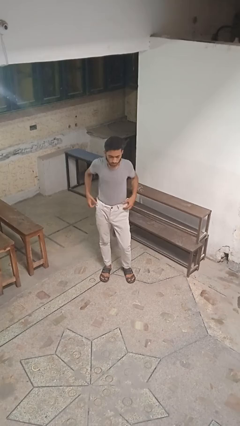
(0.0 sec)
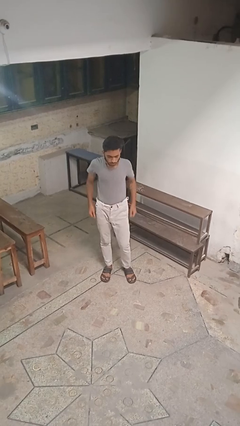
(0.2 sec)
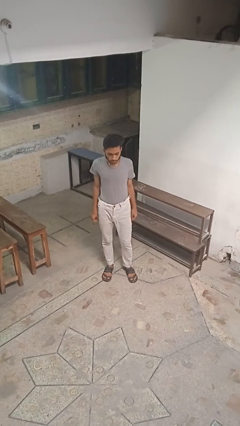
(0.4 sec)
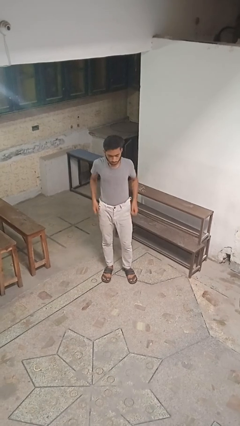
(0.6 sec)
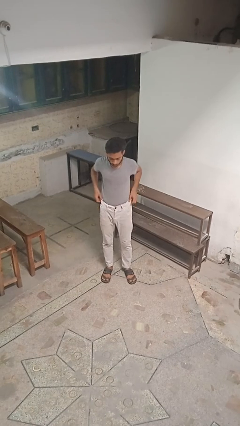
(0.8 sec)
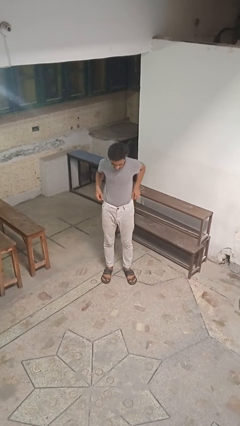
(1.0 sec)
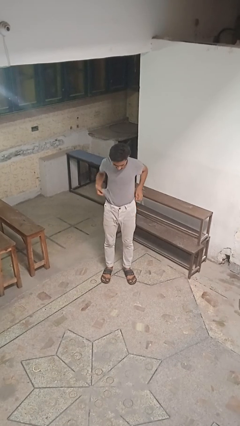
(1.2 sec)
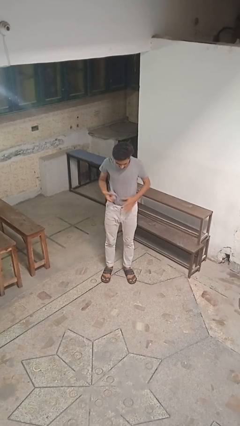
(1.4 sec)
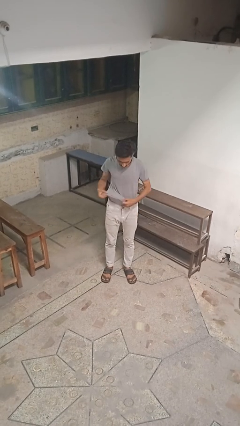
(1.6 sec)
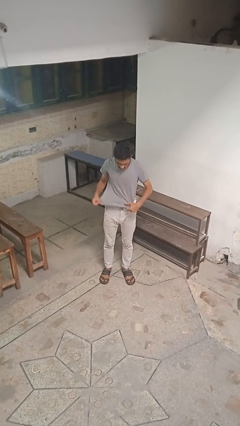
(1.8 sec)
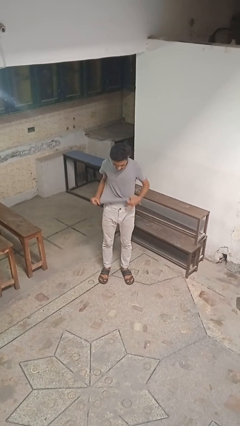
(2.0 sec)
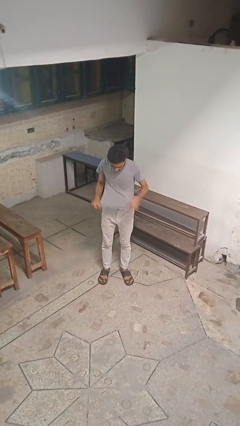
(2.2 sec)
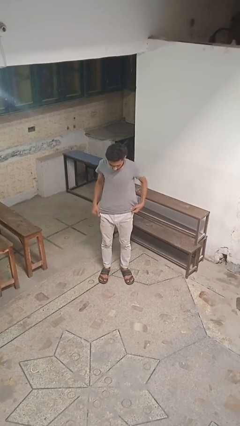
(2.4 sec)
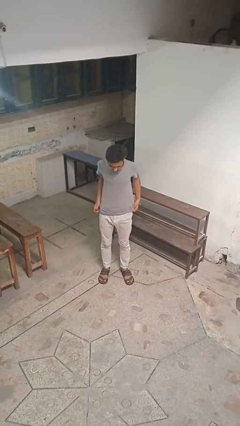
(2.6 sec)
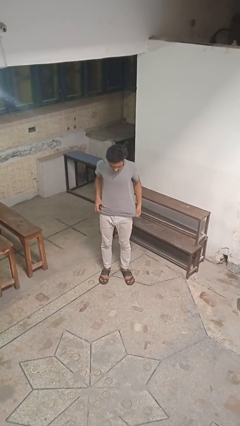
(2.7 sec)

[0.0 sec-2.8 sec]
person untucks shirt

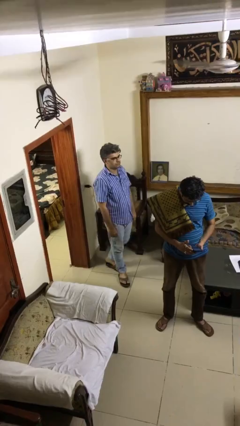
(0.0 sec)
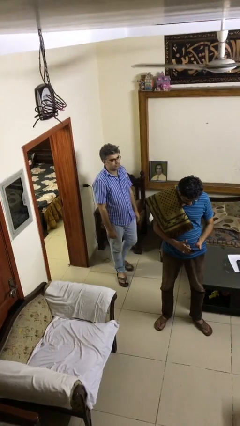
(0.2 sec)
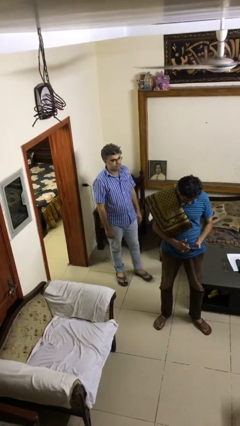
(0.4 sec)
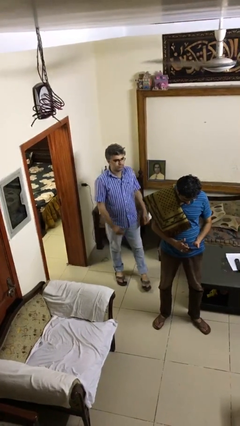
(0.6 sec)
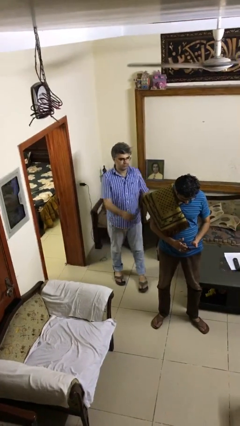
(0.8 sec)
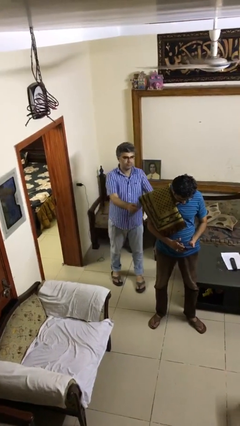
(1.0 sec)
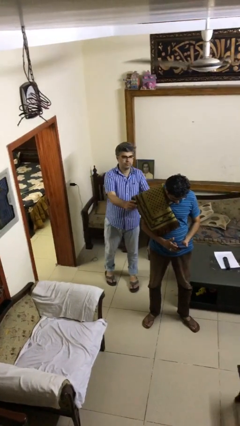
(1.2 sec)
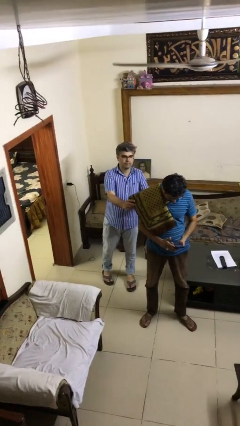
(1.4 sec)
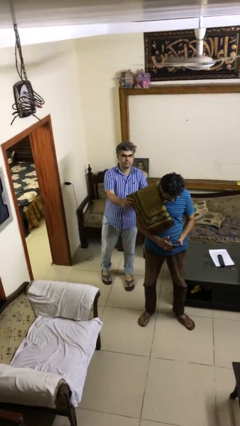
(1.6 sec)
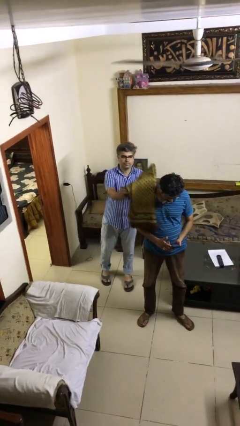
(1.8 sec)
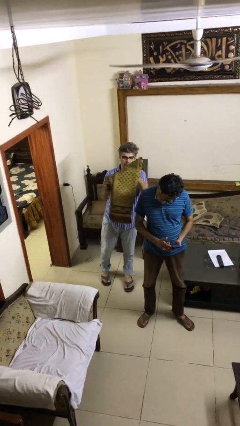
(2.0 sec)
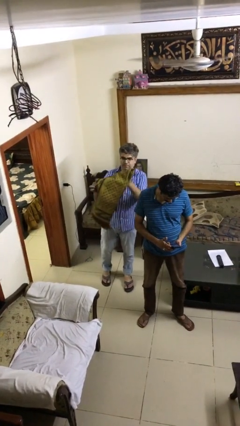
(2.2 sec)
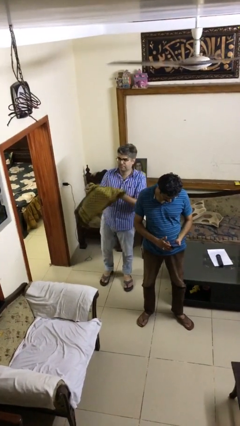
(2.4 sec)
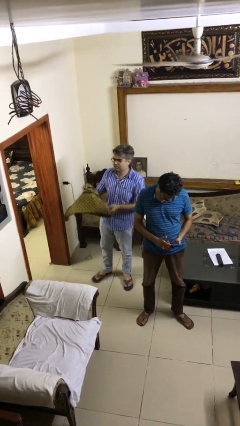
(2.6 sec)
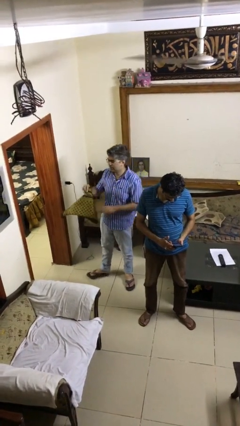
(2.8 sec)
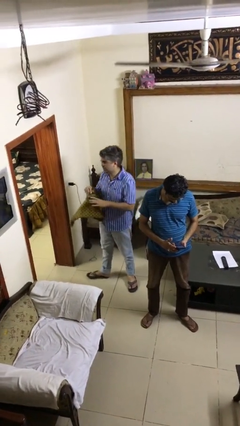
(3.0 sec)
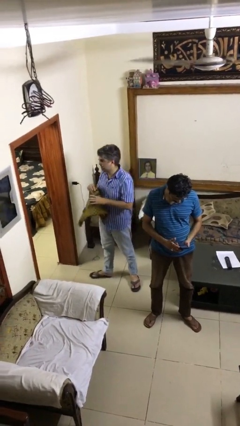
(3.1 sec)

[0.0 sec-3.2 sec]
person steals object from person

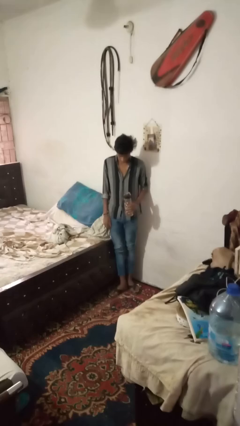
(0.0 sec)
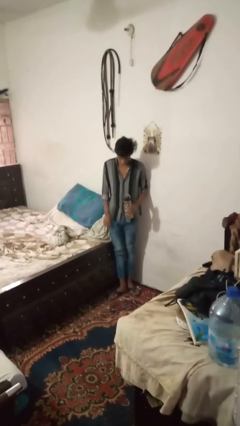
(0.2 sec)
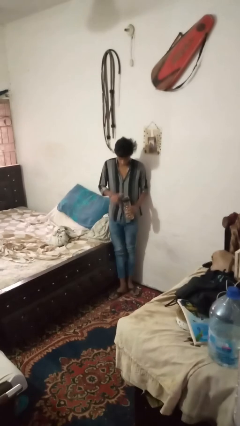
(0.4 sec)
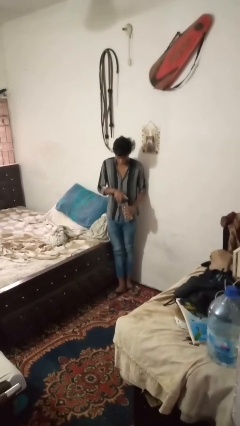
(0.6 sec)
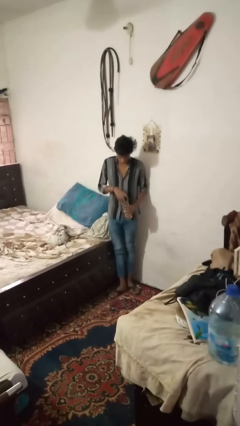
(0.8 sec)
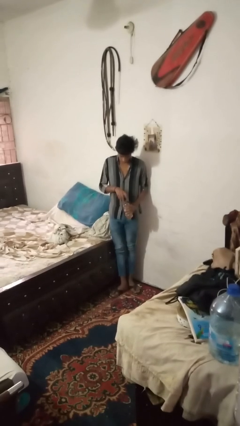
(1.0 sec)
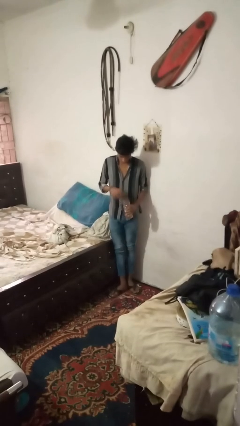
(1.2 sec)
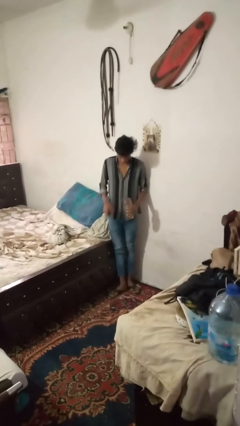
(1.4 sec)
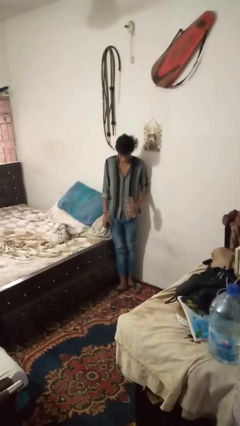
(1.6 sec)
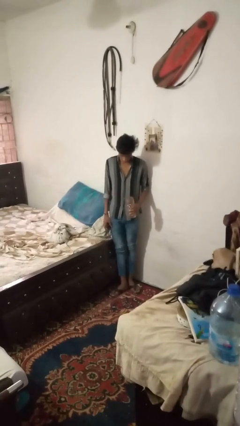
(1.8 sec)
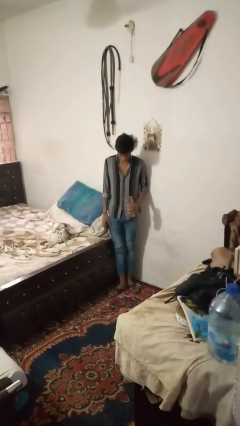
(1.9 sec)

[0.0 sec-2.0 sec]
person unscrews lid from bottle

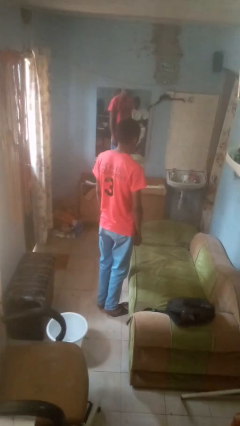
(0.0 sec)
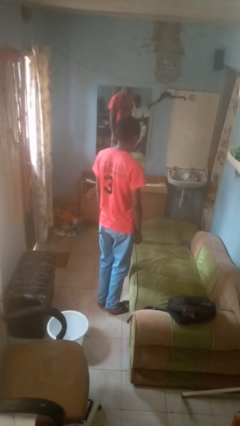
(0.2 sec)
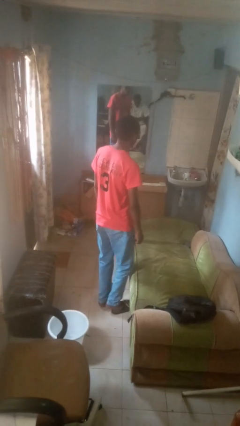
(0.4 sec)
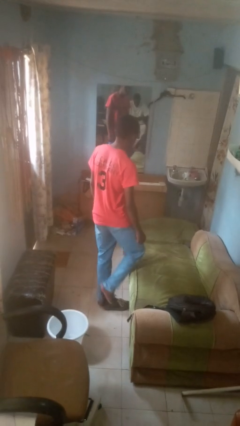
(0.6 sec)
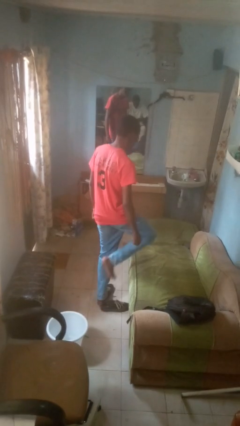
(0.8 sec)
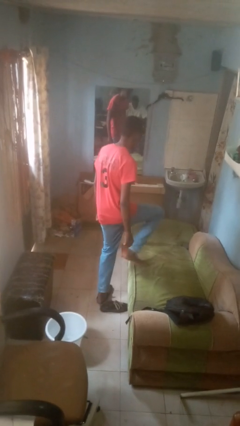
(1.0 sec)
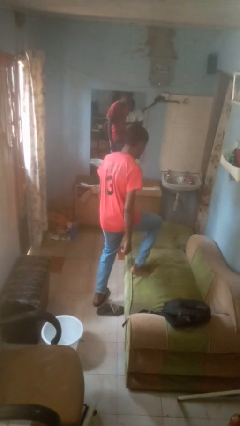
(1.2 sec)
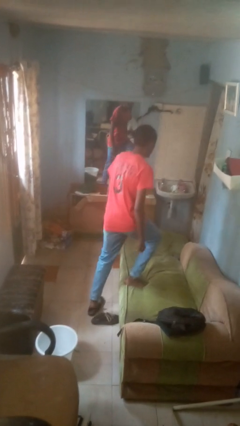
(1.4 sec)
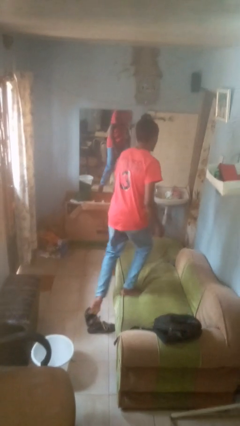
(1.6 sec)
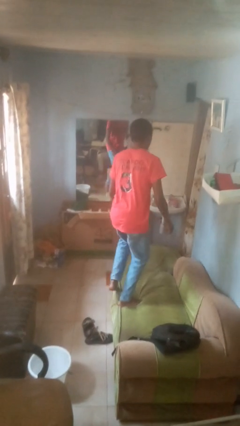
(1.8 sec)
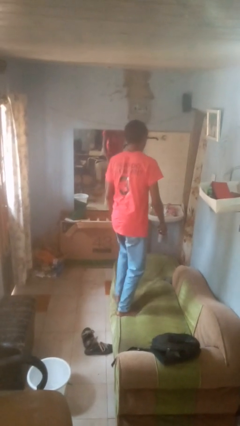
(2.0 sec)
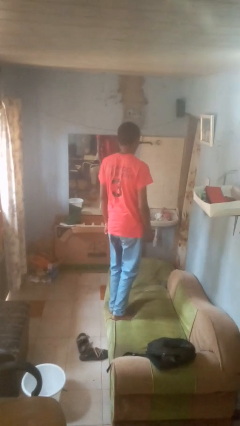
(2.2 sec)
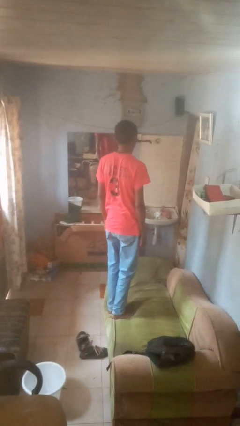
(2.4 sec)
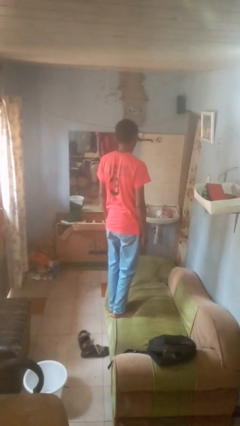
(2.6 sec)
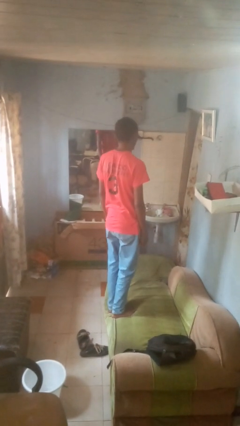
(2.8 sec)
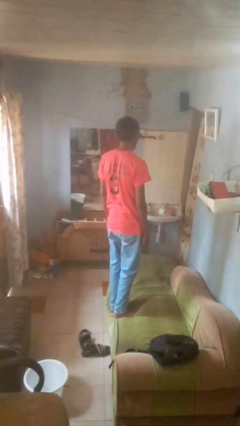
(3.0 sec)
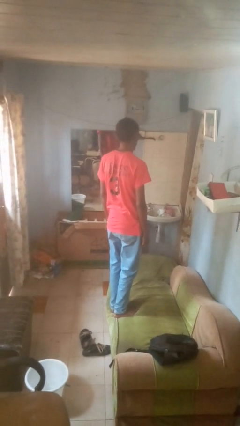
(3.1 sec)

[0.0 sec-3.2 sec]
person climbs on couch

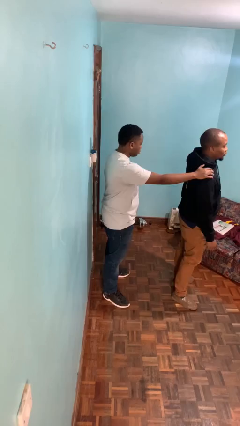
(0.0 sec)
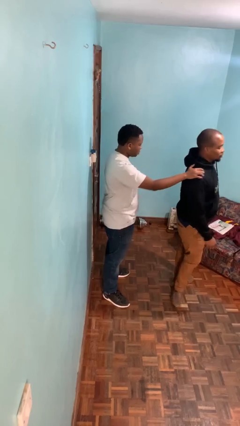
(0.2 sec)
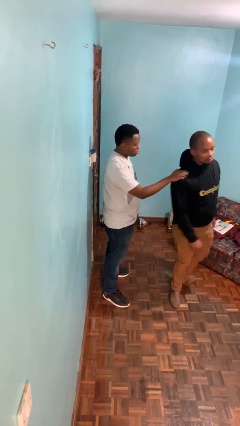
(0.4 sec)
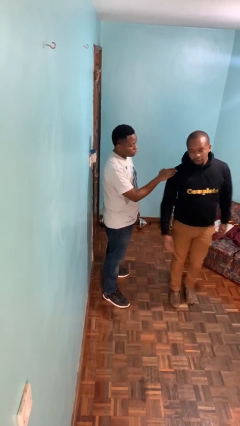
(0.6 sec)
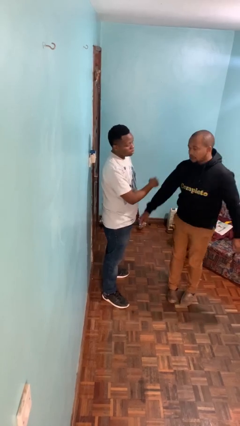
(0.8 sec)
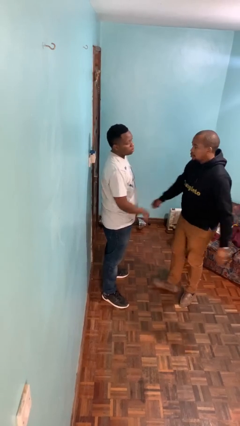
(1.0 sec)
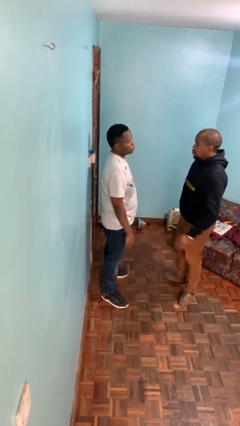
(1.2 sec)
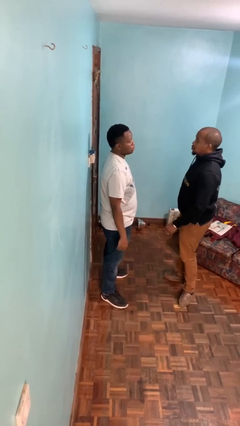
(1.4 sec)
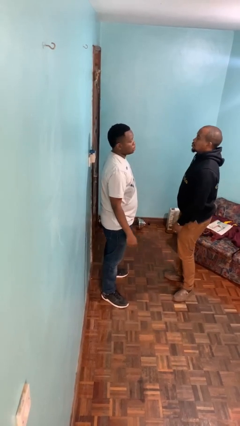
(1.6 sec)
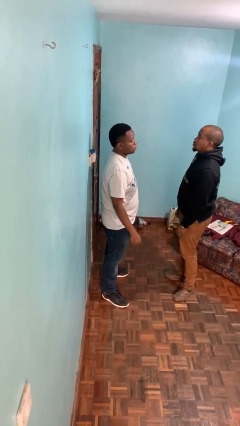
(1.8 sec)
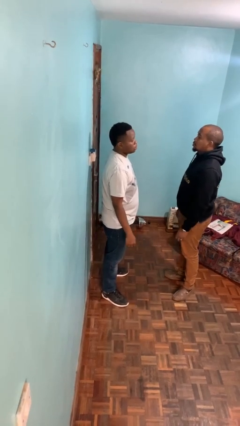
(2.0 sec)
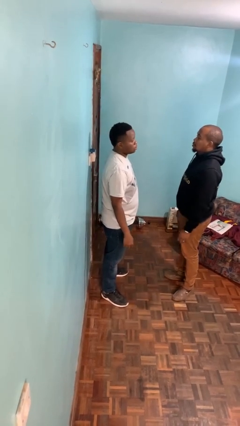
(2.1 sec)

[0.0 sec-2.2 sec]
person spins person around

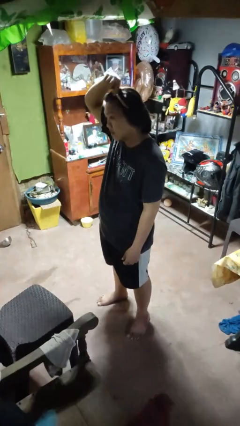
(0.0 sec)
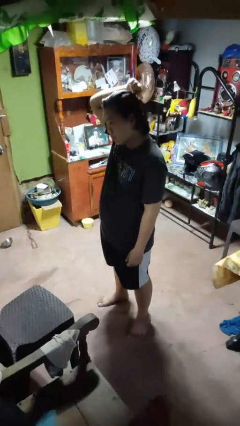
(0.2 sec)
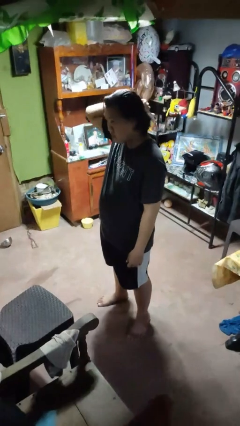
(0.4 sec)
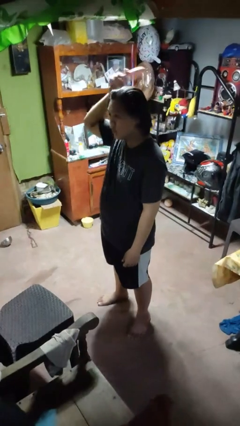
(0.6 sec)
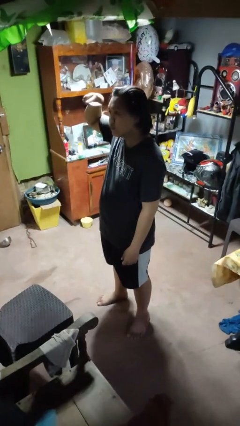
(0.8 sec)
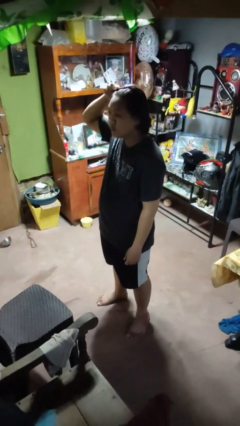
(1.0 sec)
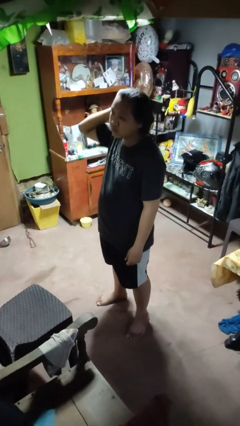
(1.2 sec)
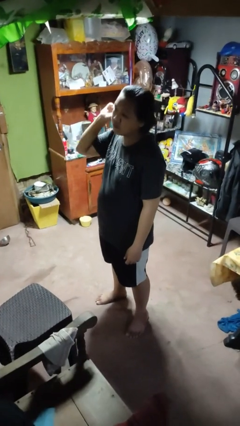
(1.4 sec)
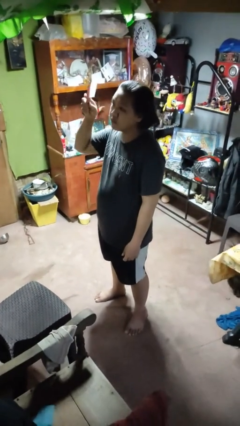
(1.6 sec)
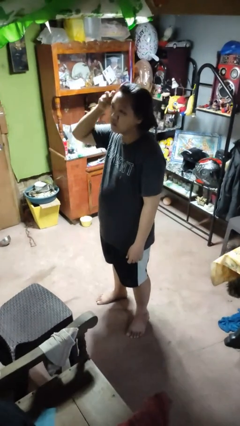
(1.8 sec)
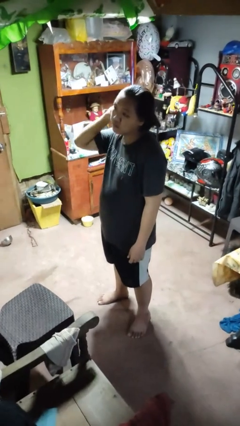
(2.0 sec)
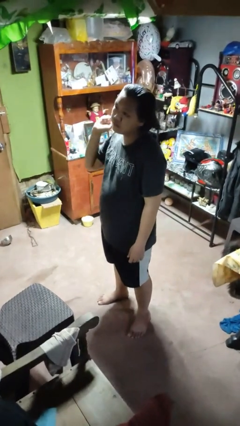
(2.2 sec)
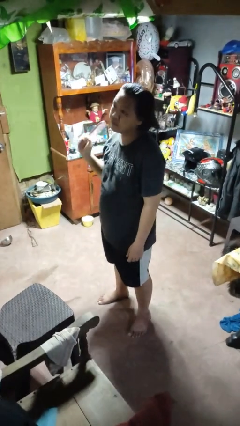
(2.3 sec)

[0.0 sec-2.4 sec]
person brushes hair

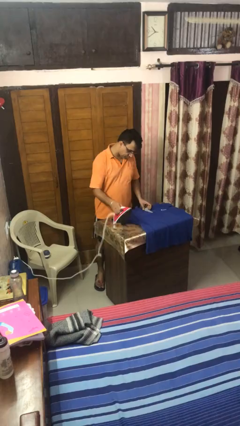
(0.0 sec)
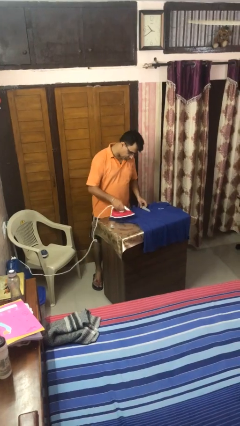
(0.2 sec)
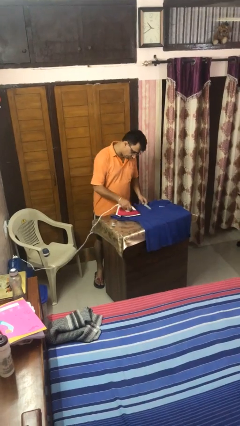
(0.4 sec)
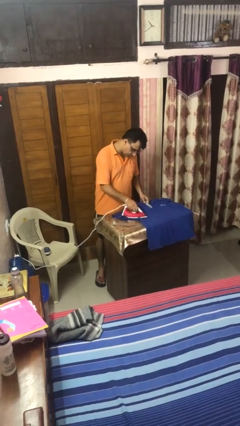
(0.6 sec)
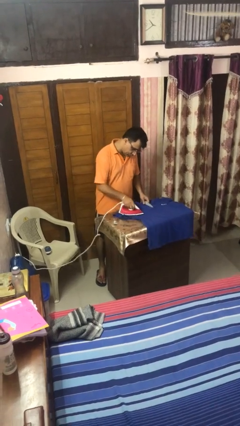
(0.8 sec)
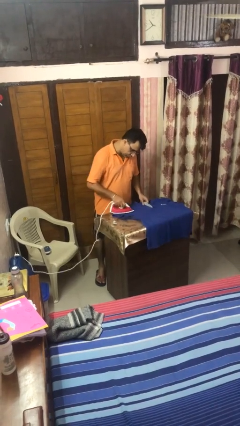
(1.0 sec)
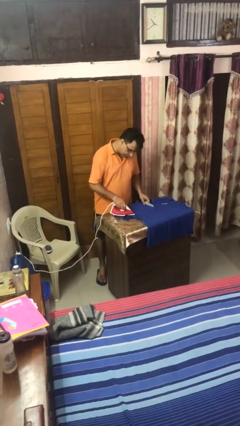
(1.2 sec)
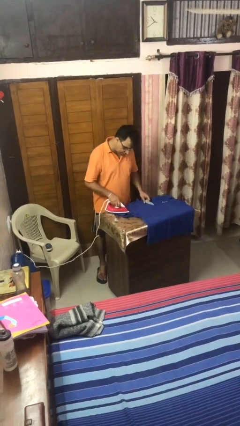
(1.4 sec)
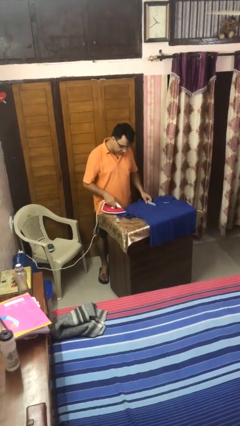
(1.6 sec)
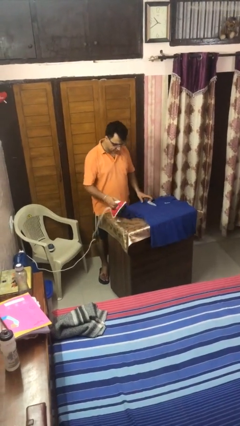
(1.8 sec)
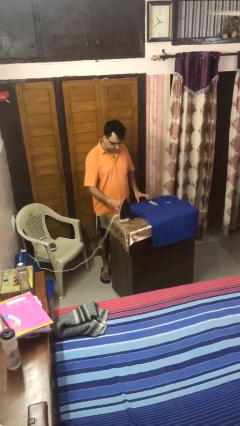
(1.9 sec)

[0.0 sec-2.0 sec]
person irons clothes
